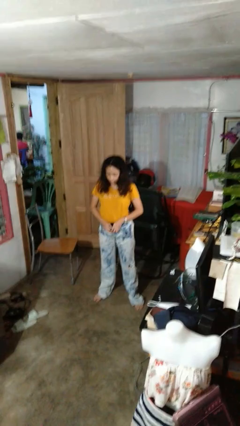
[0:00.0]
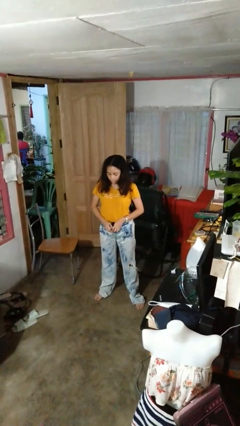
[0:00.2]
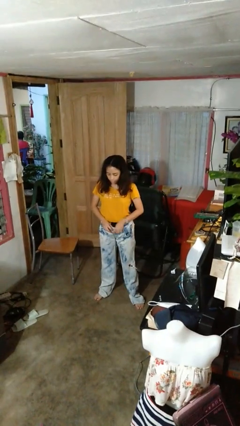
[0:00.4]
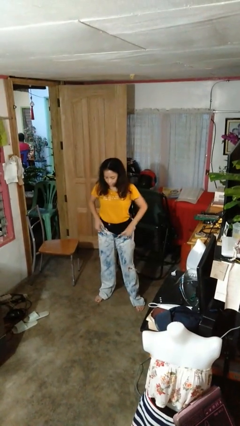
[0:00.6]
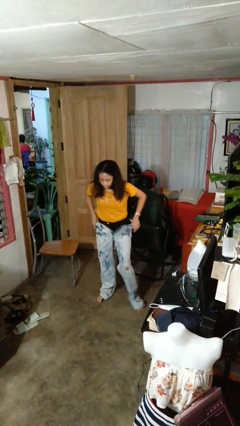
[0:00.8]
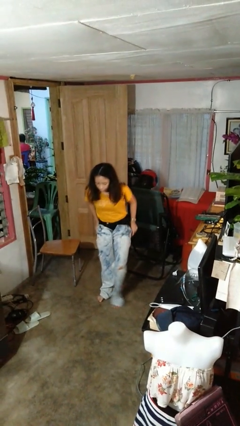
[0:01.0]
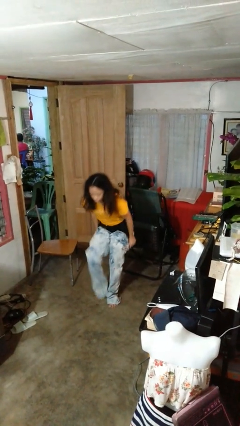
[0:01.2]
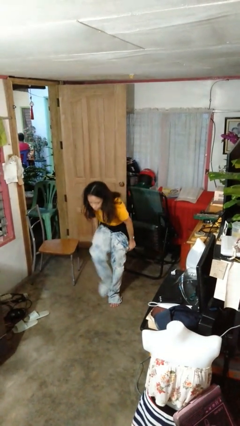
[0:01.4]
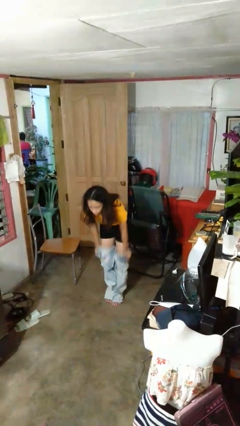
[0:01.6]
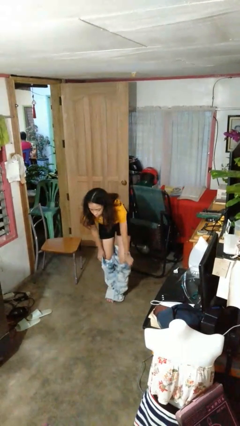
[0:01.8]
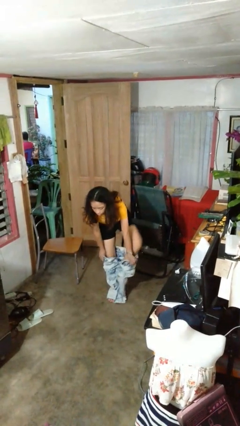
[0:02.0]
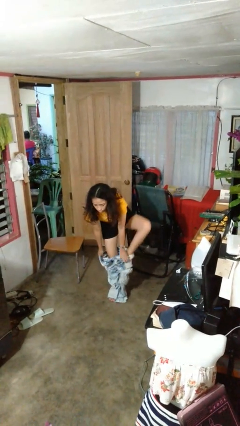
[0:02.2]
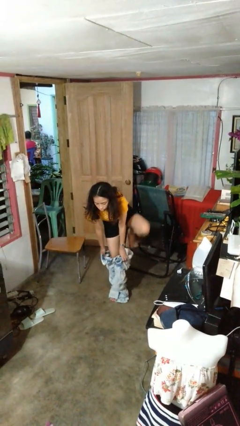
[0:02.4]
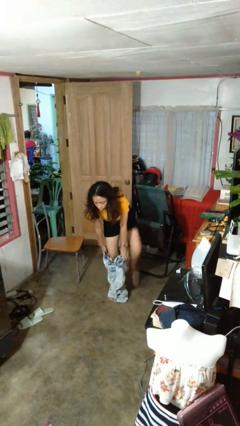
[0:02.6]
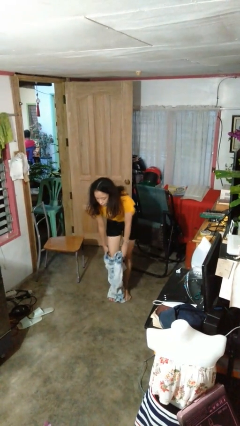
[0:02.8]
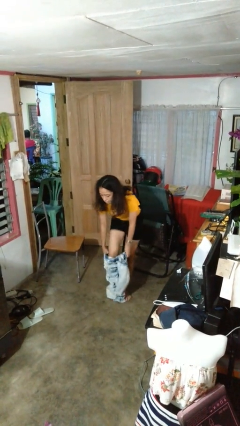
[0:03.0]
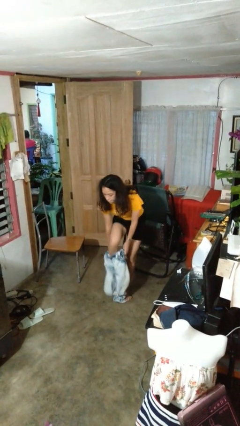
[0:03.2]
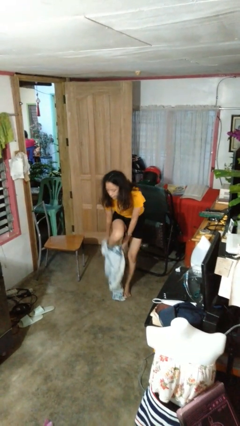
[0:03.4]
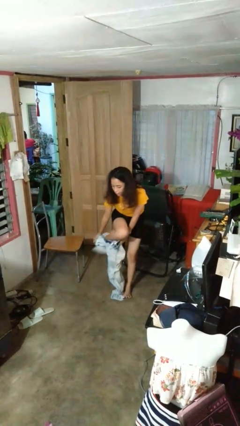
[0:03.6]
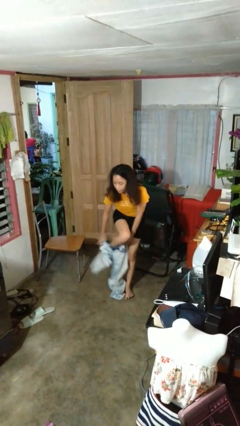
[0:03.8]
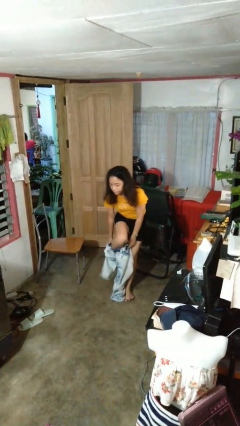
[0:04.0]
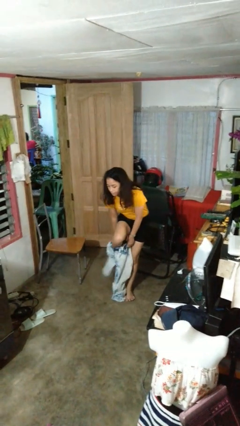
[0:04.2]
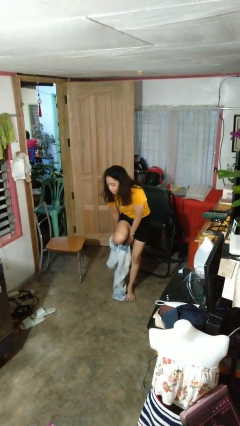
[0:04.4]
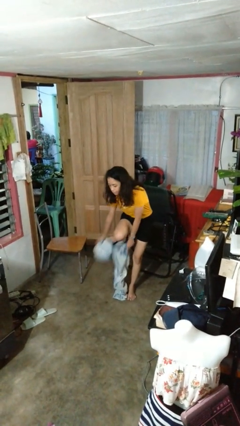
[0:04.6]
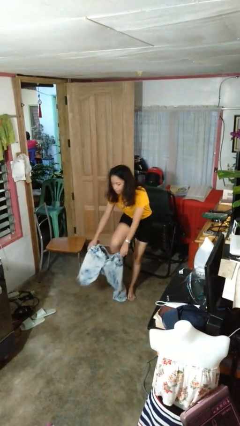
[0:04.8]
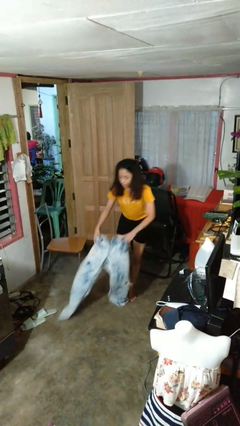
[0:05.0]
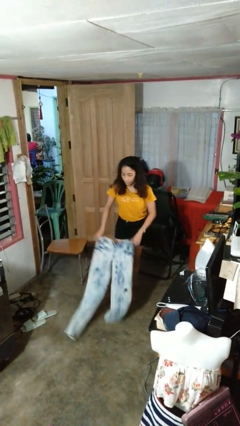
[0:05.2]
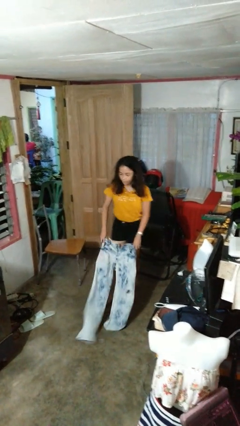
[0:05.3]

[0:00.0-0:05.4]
person takes off pants

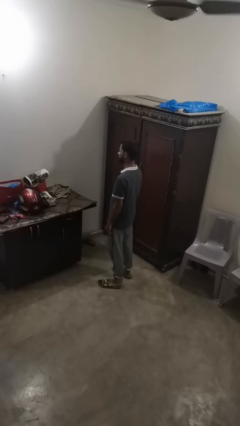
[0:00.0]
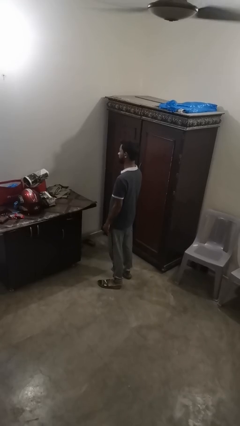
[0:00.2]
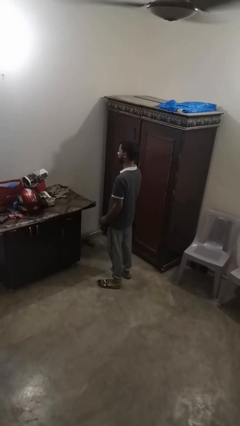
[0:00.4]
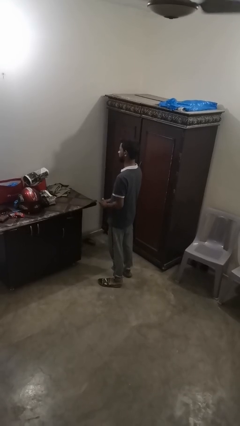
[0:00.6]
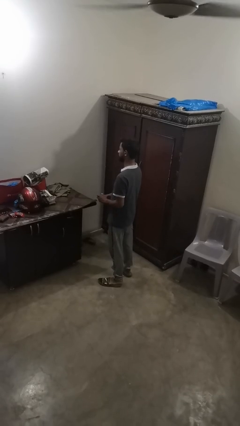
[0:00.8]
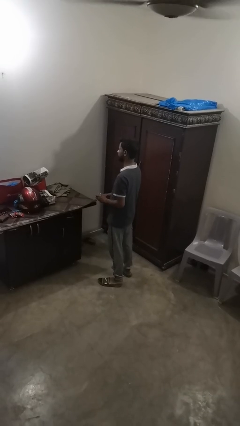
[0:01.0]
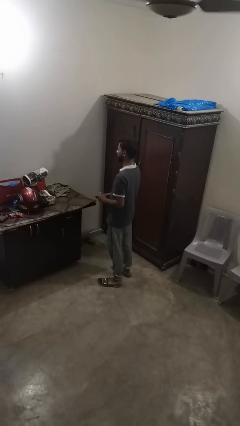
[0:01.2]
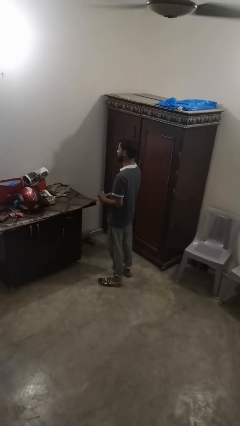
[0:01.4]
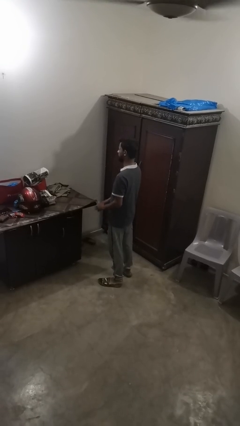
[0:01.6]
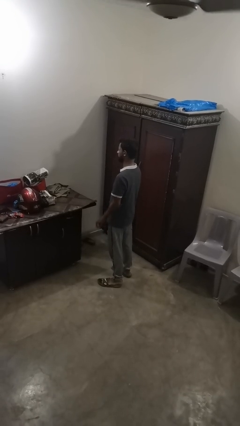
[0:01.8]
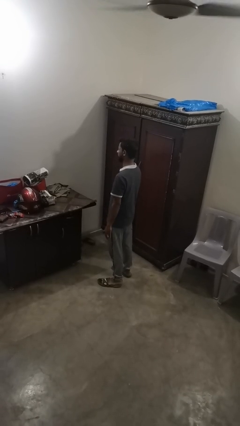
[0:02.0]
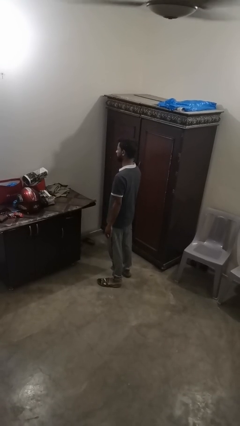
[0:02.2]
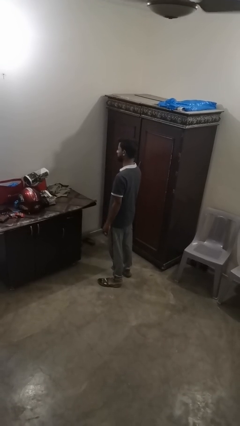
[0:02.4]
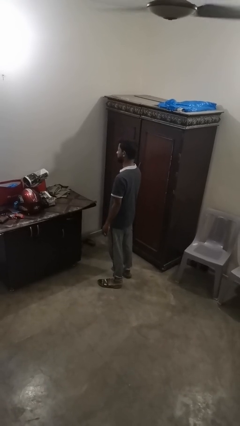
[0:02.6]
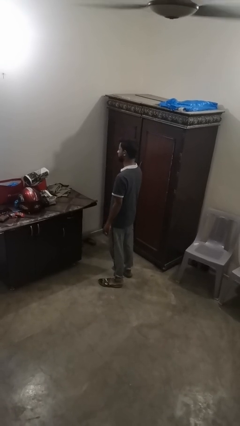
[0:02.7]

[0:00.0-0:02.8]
person puts on ring

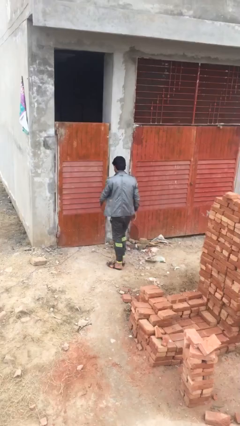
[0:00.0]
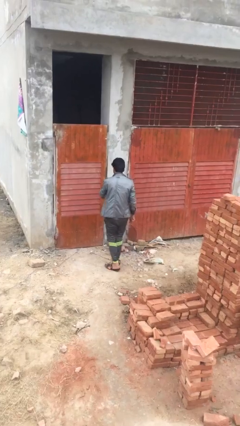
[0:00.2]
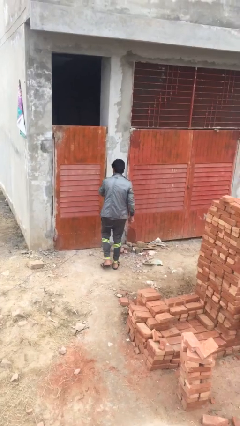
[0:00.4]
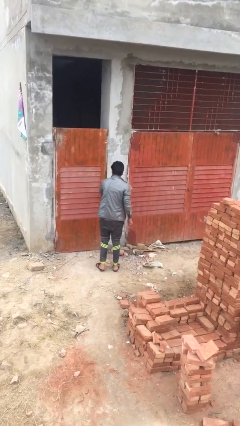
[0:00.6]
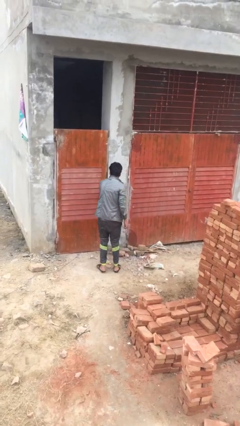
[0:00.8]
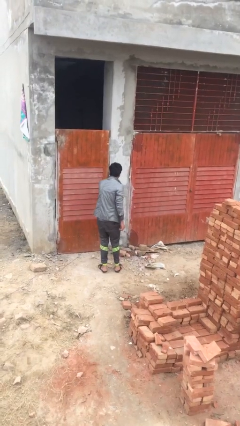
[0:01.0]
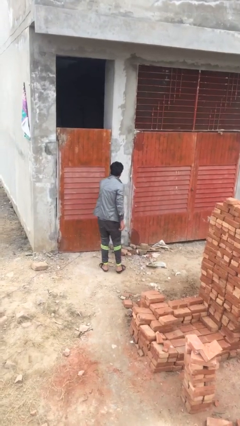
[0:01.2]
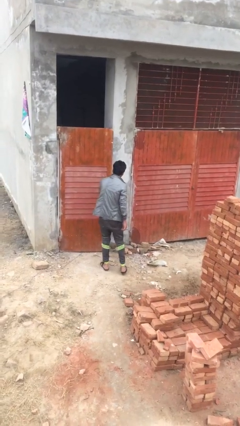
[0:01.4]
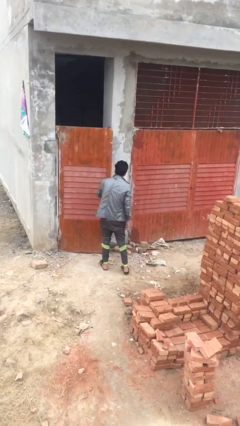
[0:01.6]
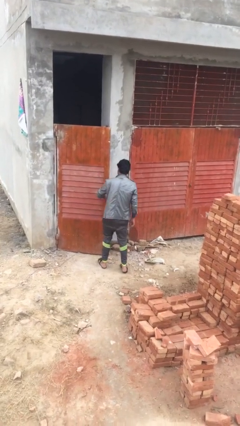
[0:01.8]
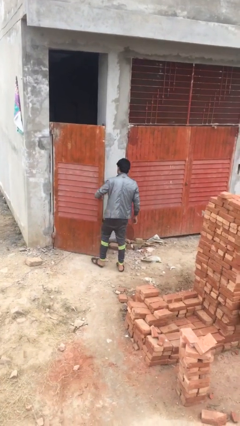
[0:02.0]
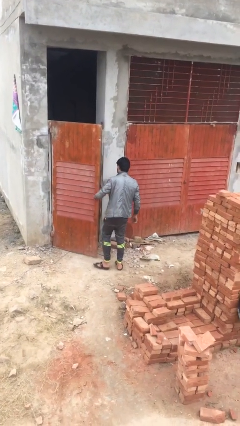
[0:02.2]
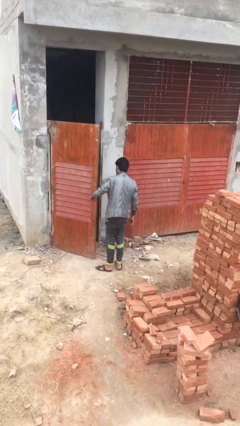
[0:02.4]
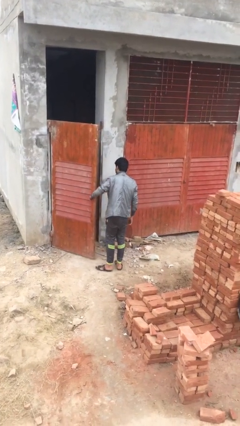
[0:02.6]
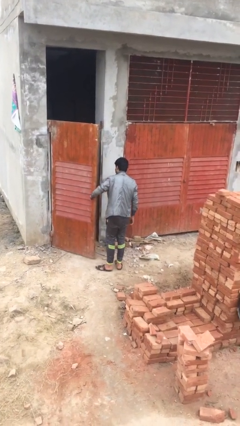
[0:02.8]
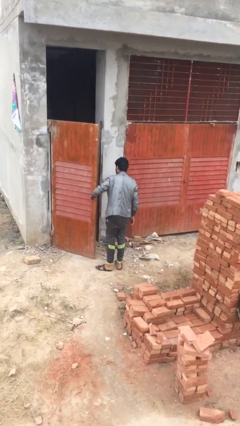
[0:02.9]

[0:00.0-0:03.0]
person opens facility door

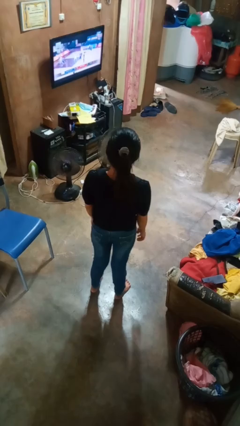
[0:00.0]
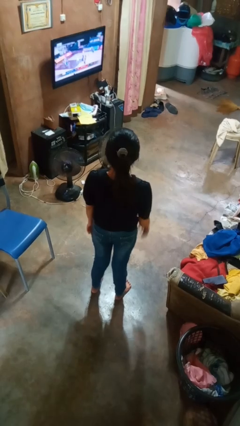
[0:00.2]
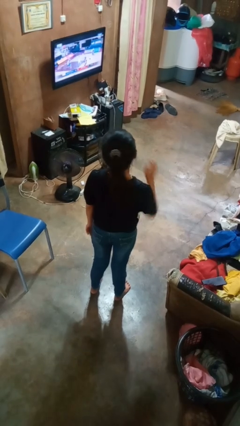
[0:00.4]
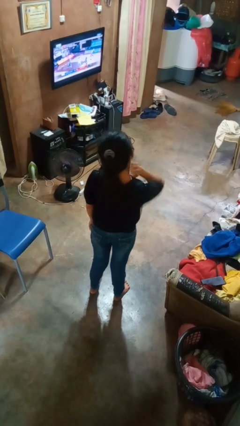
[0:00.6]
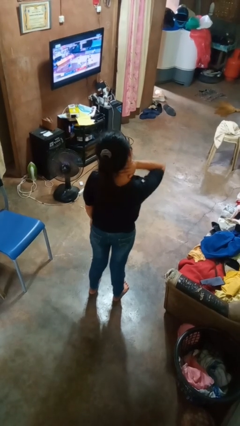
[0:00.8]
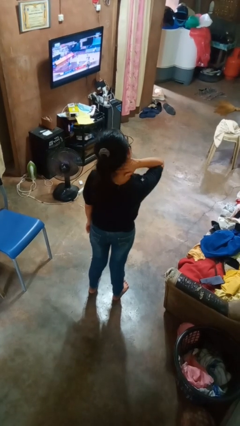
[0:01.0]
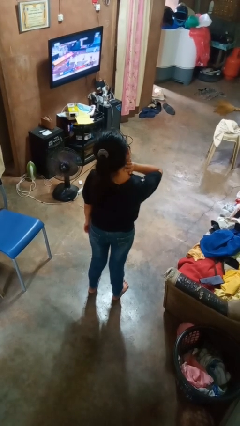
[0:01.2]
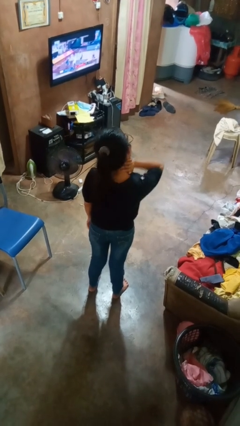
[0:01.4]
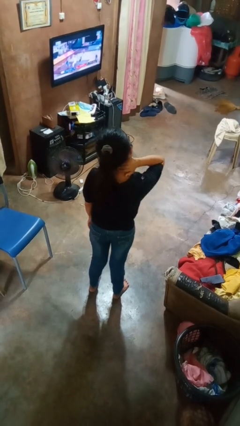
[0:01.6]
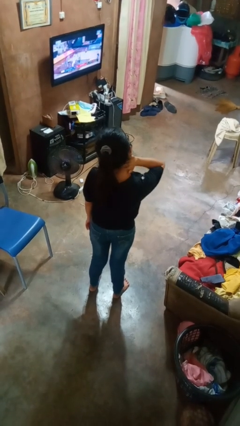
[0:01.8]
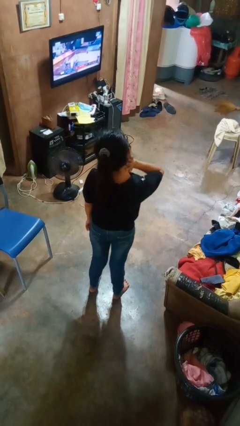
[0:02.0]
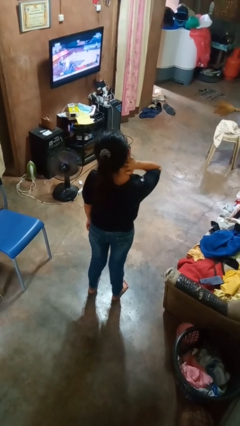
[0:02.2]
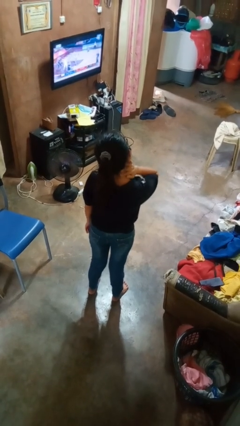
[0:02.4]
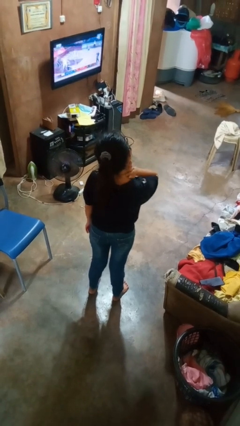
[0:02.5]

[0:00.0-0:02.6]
person rubs neck

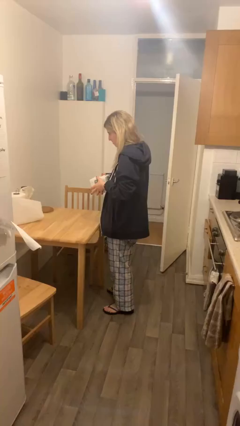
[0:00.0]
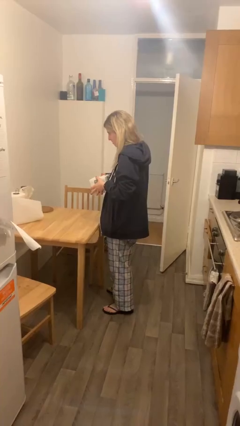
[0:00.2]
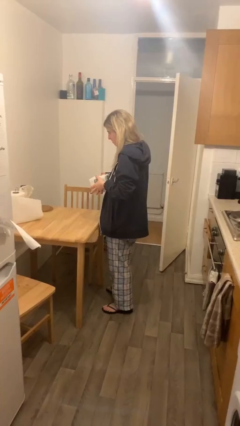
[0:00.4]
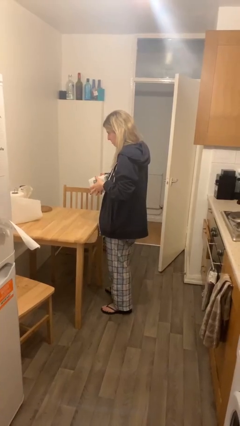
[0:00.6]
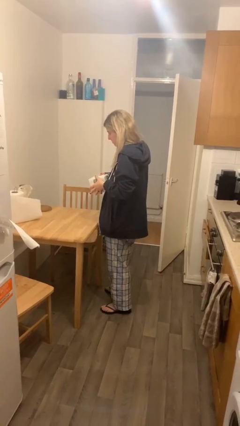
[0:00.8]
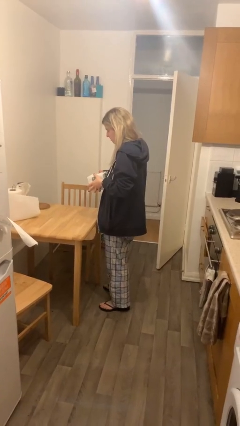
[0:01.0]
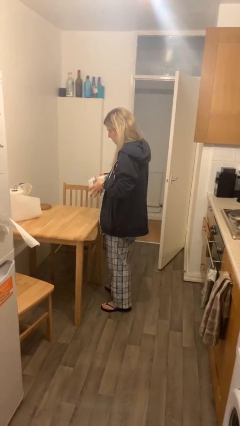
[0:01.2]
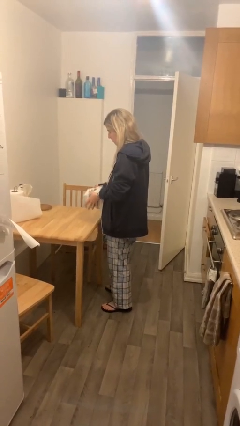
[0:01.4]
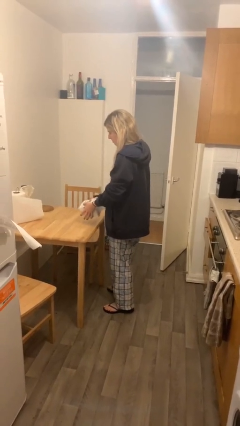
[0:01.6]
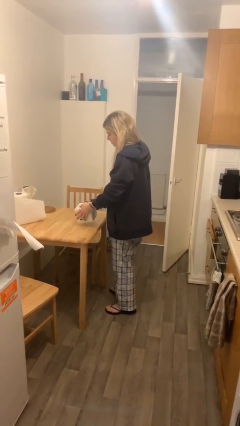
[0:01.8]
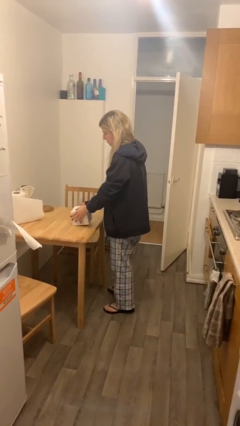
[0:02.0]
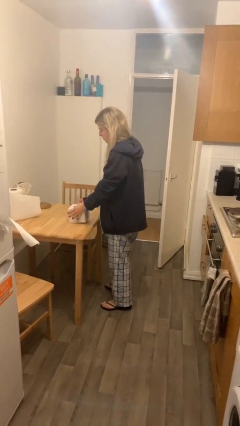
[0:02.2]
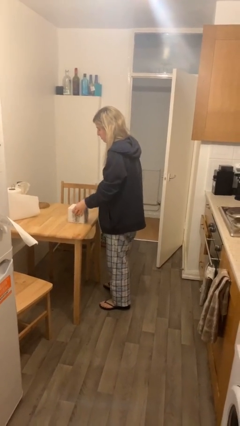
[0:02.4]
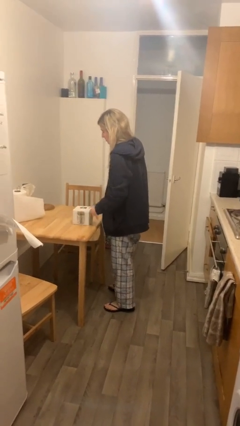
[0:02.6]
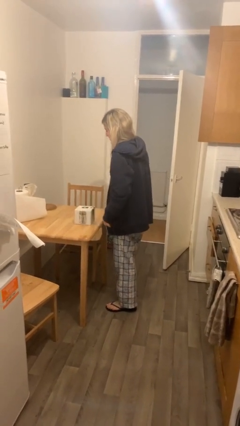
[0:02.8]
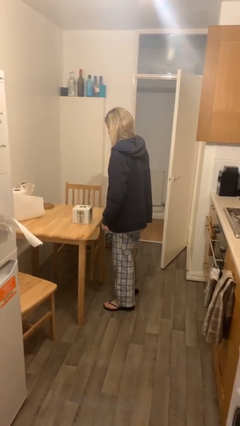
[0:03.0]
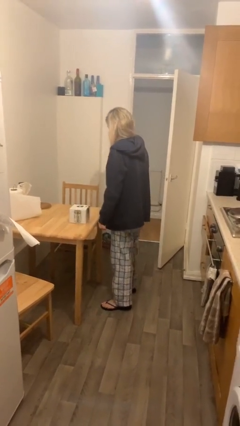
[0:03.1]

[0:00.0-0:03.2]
person puts down object on table

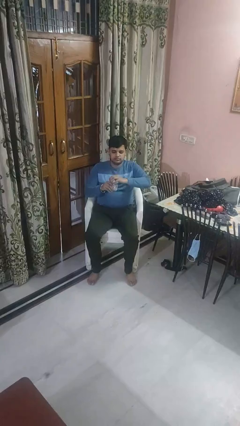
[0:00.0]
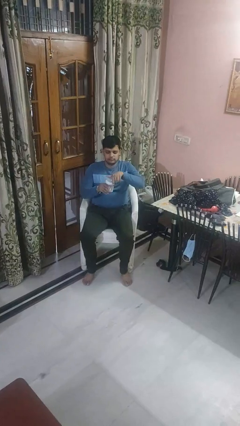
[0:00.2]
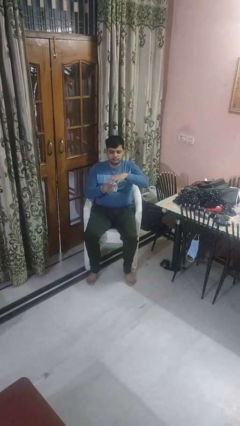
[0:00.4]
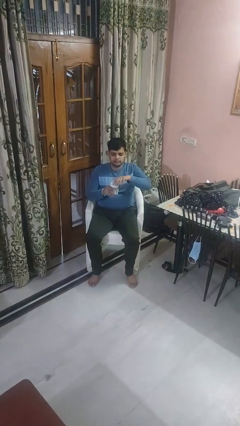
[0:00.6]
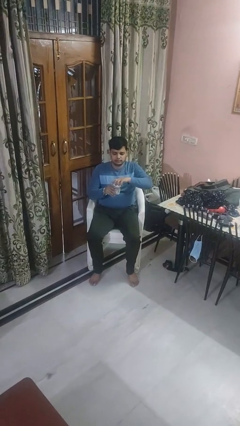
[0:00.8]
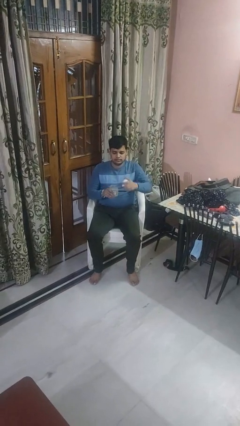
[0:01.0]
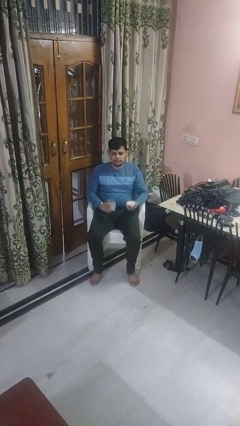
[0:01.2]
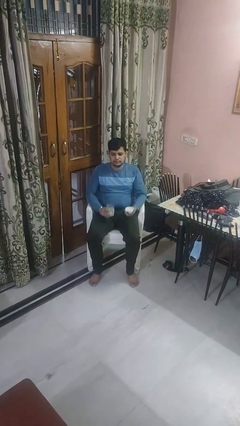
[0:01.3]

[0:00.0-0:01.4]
person opens jar
